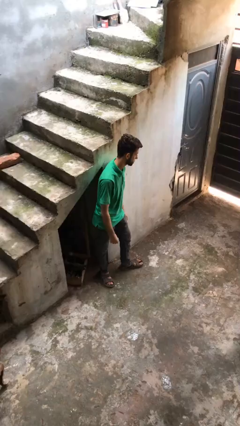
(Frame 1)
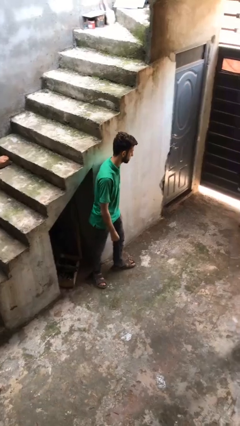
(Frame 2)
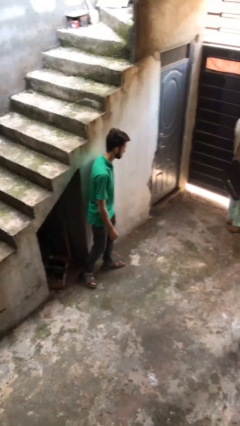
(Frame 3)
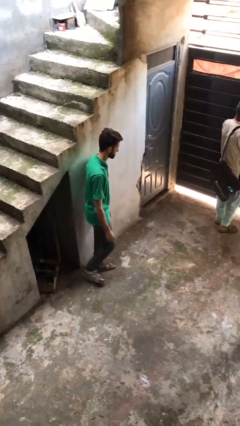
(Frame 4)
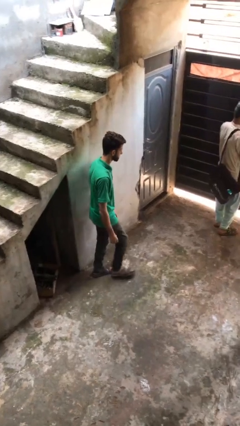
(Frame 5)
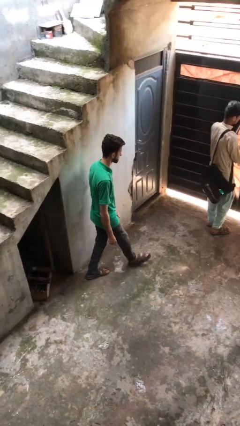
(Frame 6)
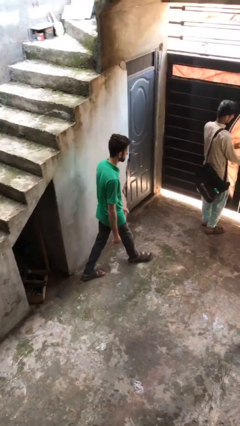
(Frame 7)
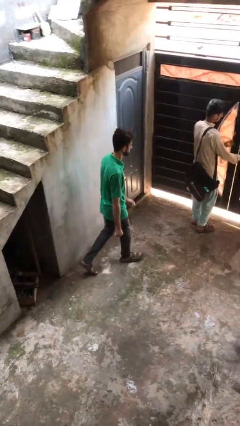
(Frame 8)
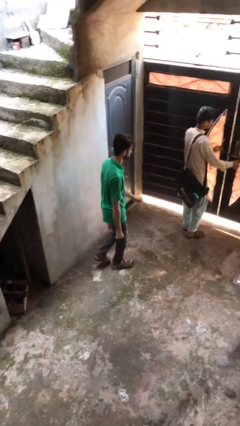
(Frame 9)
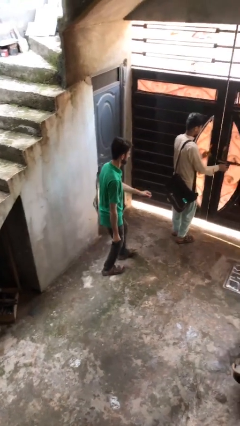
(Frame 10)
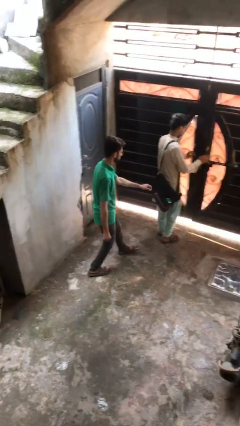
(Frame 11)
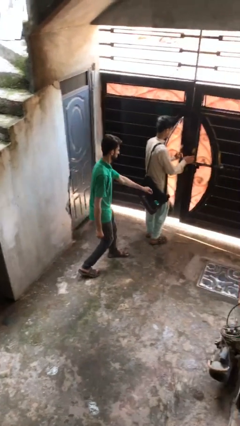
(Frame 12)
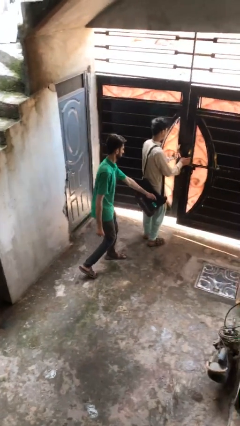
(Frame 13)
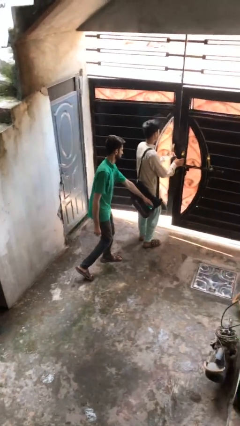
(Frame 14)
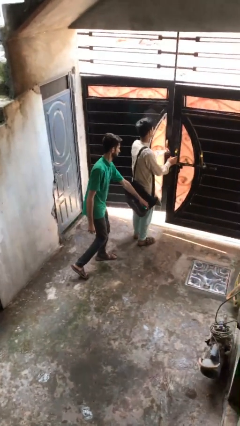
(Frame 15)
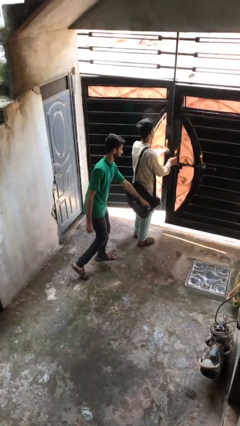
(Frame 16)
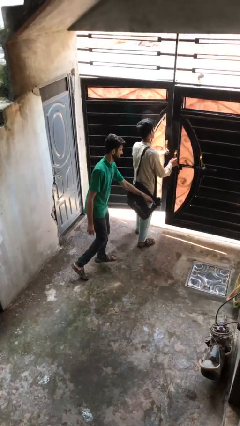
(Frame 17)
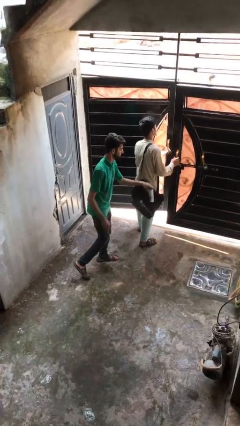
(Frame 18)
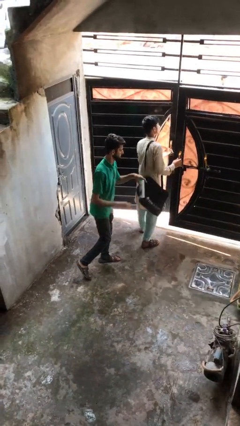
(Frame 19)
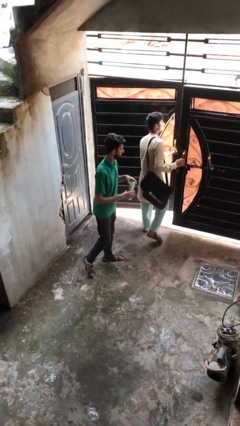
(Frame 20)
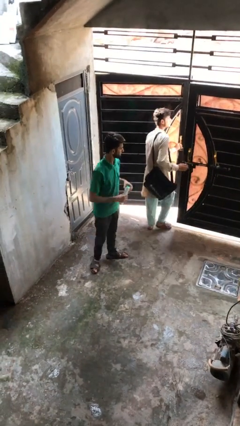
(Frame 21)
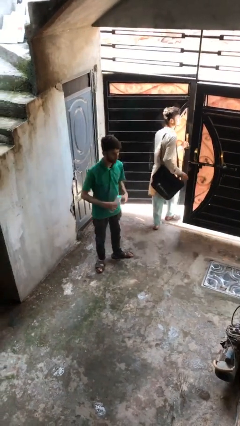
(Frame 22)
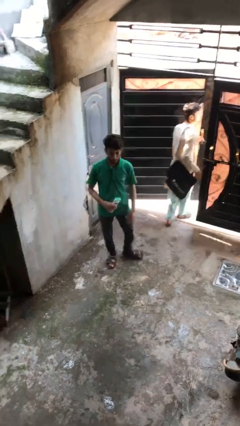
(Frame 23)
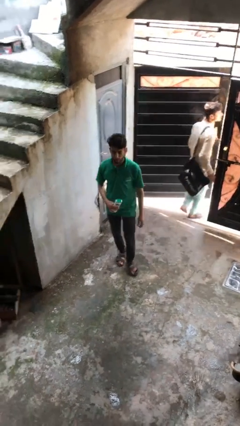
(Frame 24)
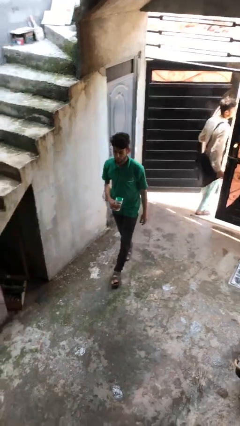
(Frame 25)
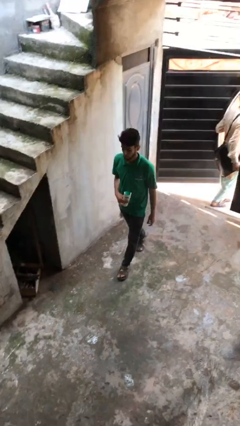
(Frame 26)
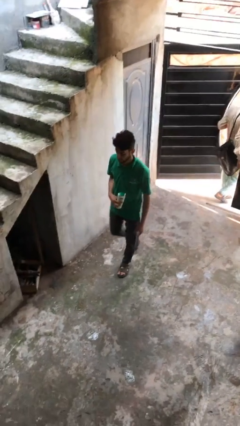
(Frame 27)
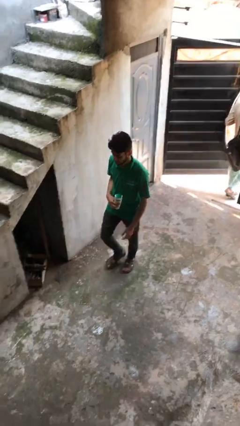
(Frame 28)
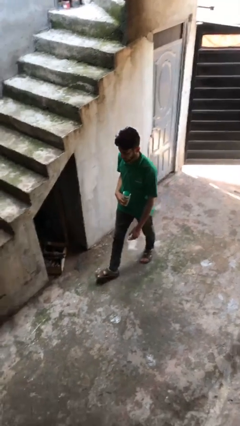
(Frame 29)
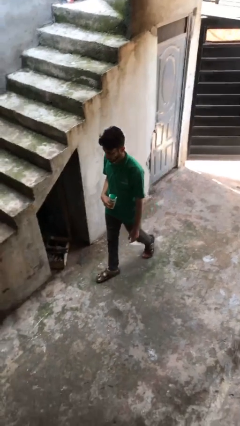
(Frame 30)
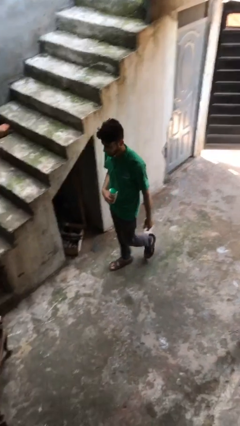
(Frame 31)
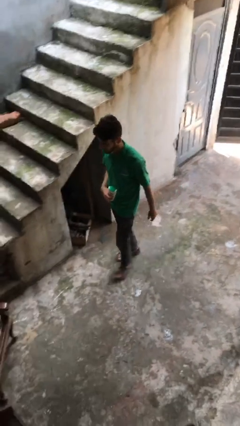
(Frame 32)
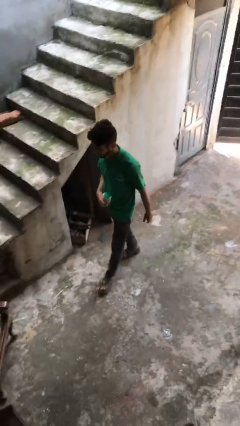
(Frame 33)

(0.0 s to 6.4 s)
person steals object from person

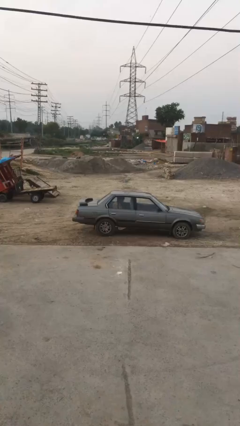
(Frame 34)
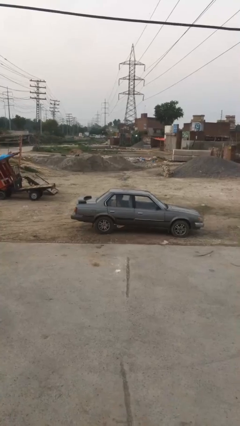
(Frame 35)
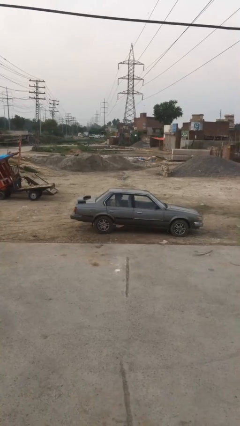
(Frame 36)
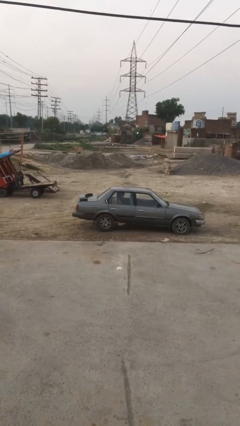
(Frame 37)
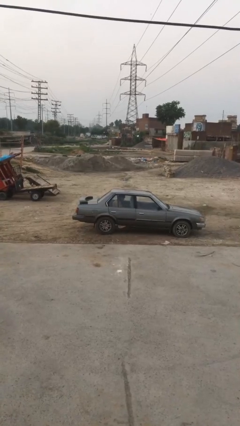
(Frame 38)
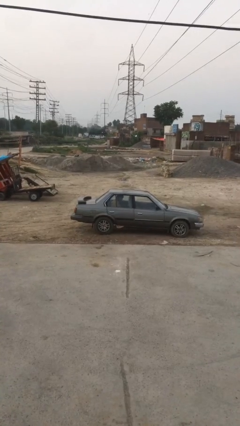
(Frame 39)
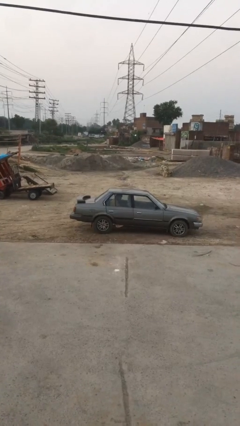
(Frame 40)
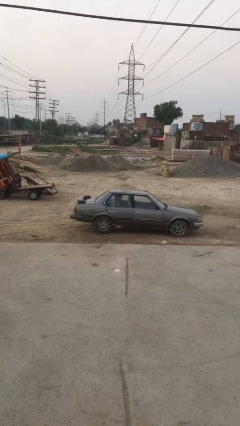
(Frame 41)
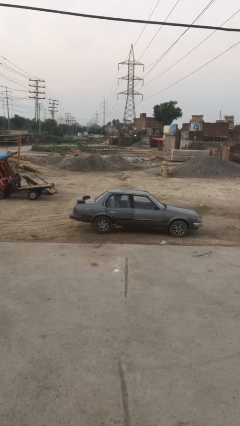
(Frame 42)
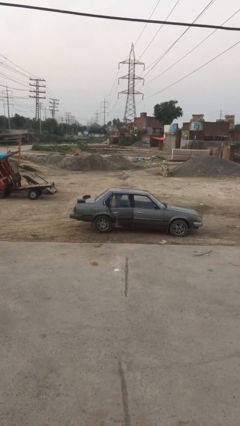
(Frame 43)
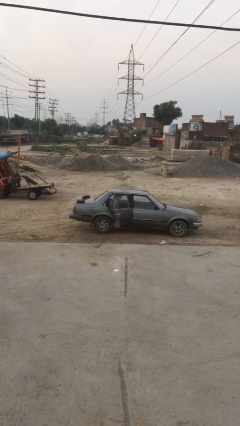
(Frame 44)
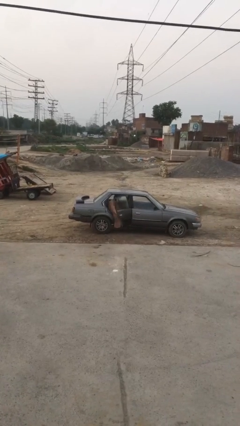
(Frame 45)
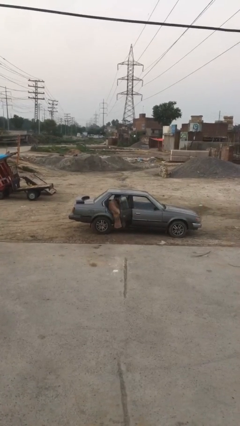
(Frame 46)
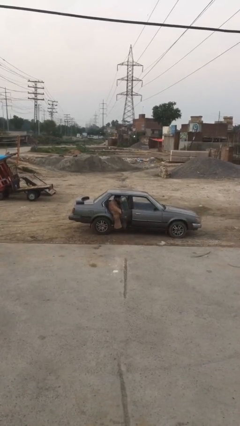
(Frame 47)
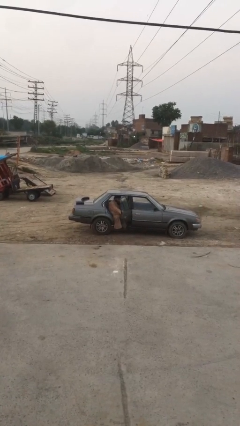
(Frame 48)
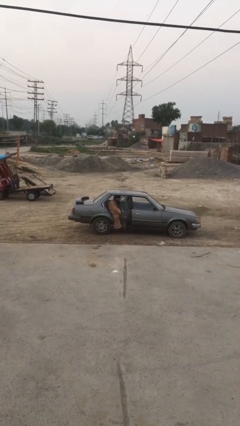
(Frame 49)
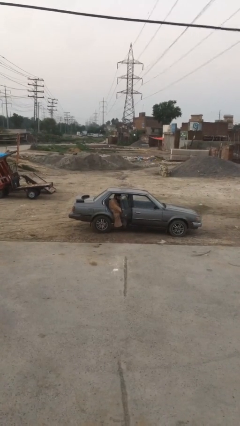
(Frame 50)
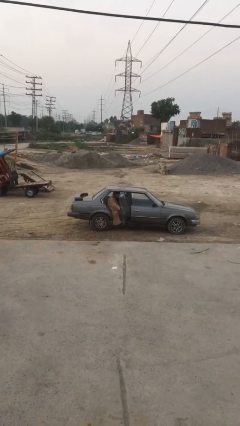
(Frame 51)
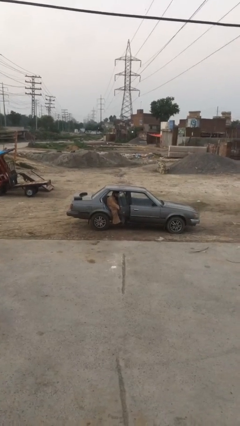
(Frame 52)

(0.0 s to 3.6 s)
person opens car door

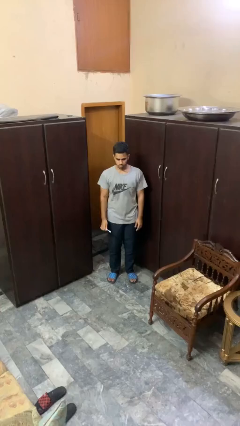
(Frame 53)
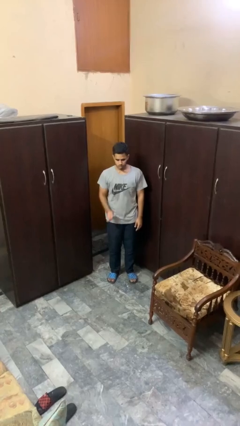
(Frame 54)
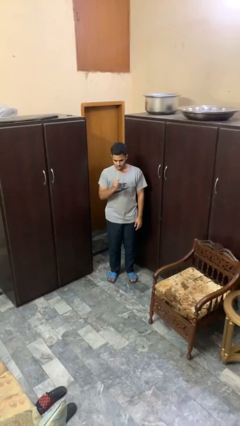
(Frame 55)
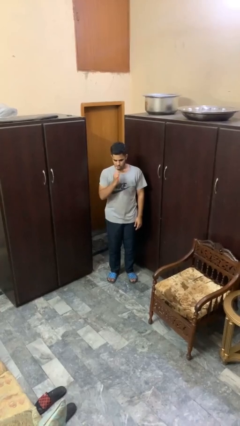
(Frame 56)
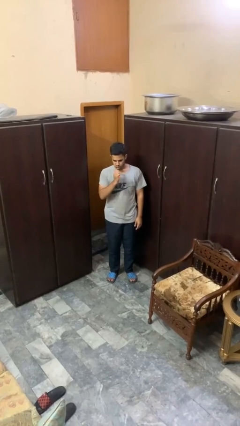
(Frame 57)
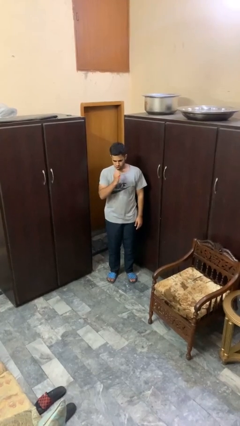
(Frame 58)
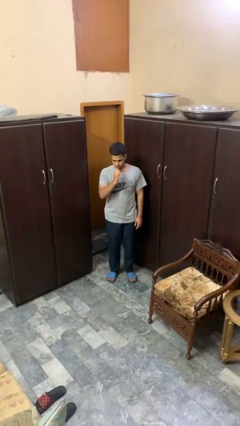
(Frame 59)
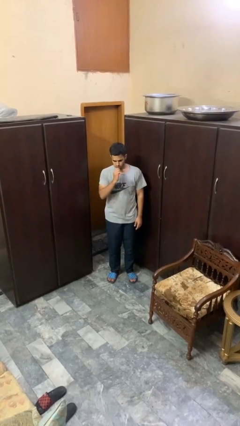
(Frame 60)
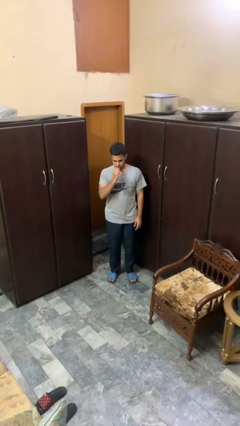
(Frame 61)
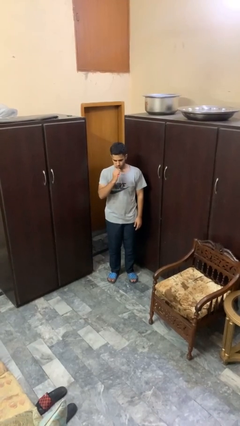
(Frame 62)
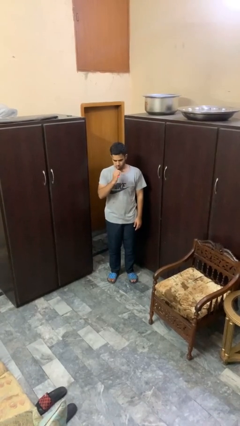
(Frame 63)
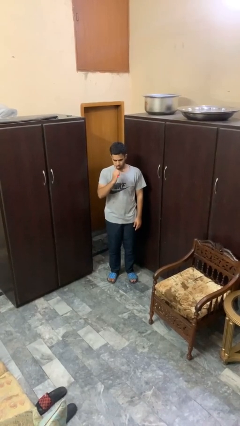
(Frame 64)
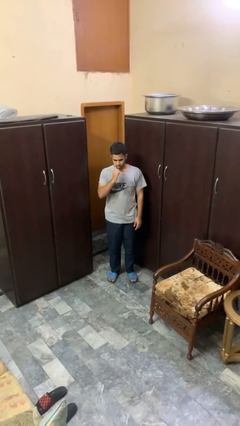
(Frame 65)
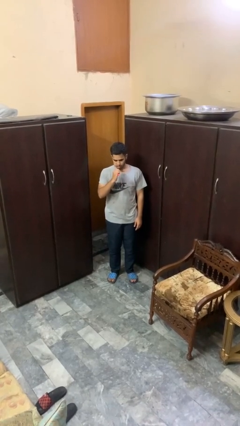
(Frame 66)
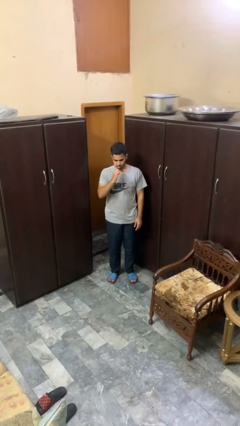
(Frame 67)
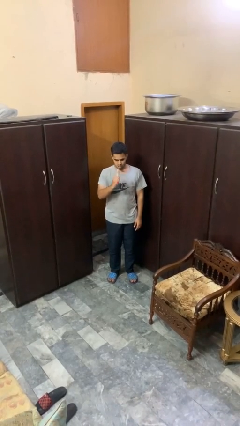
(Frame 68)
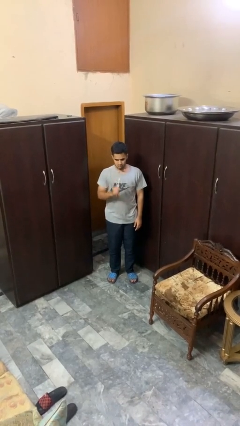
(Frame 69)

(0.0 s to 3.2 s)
person brushes teeth

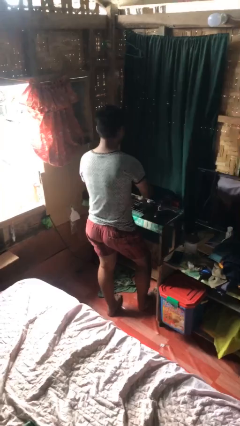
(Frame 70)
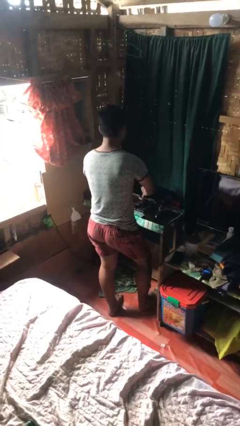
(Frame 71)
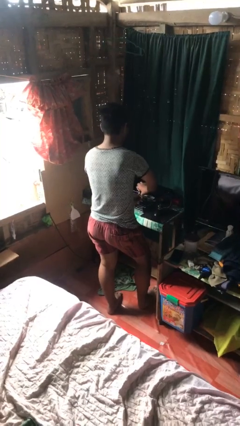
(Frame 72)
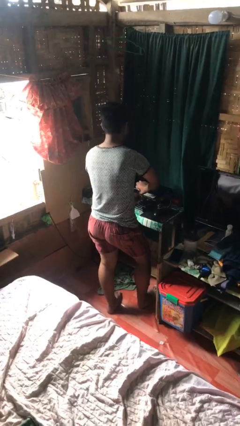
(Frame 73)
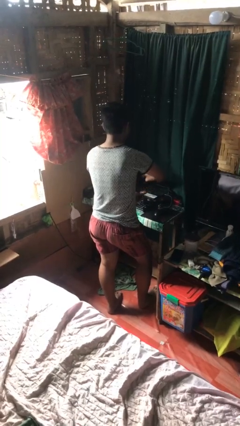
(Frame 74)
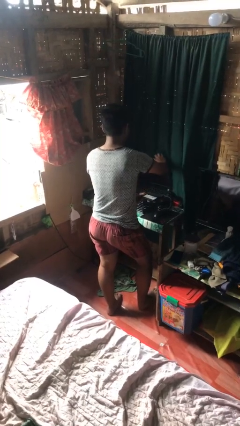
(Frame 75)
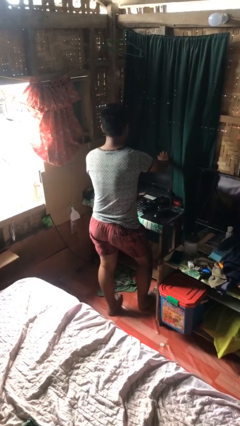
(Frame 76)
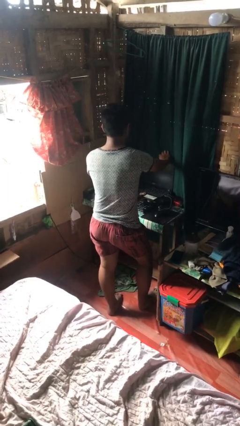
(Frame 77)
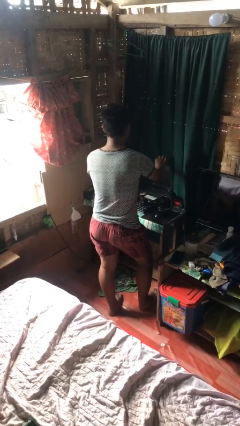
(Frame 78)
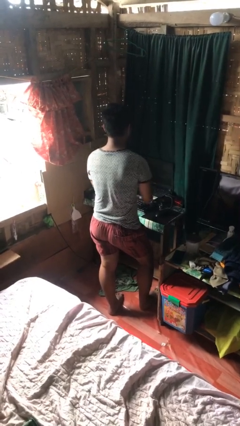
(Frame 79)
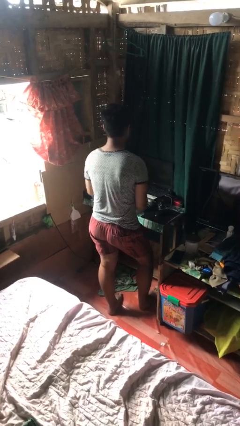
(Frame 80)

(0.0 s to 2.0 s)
person opens laptop

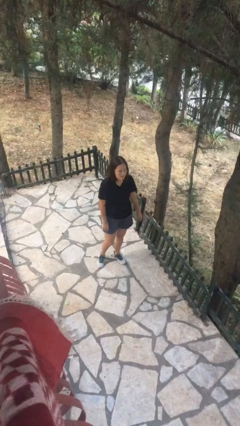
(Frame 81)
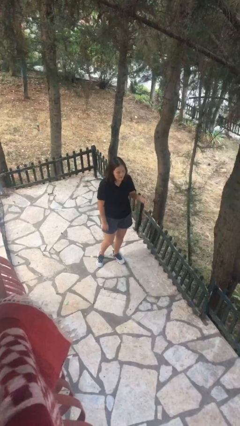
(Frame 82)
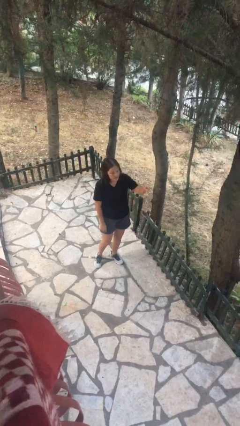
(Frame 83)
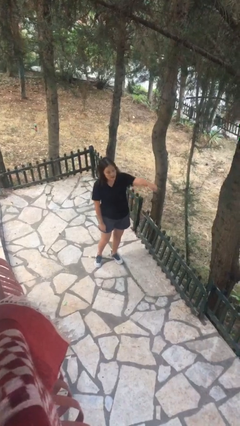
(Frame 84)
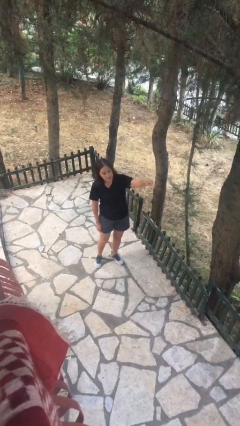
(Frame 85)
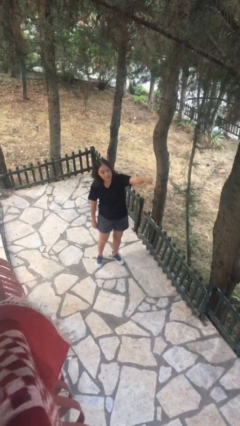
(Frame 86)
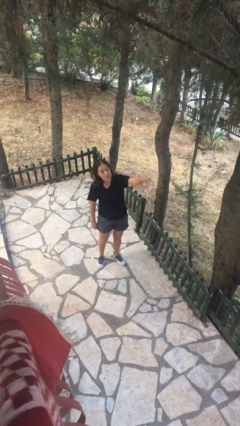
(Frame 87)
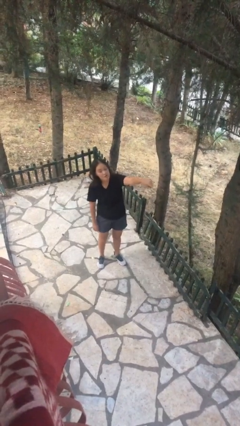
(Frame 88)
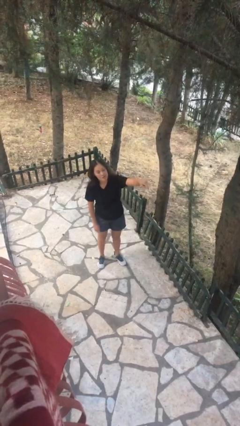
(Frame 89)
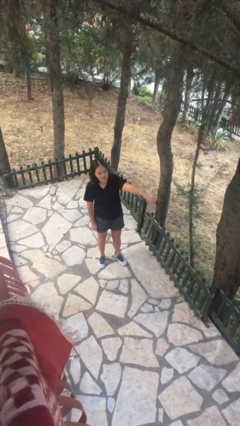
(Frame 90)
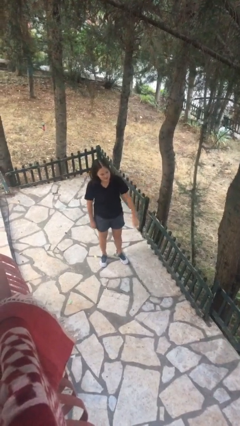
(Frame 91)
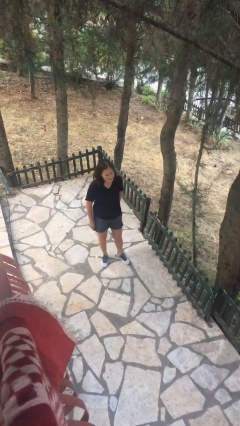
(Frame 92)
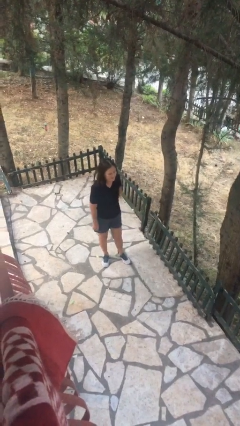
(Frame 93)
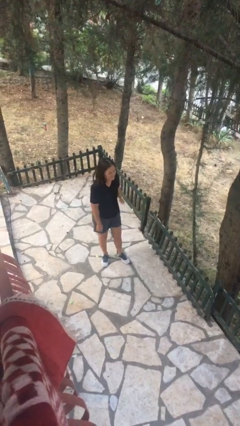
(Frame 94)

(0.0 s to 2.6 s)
person points at person
